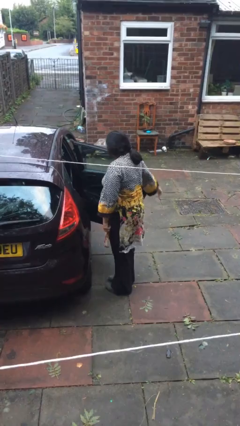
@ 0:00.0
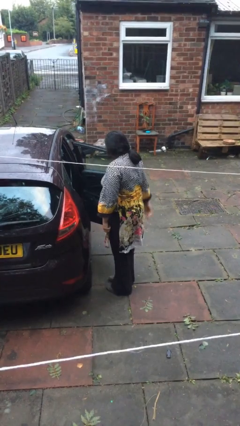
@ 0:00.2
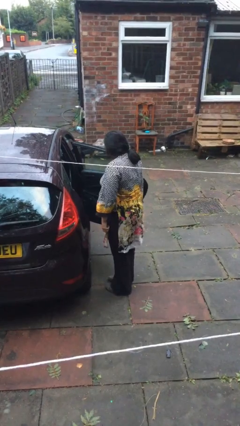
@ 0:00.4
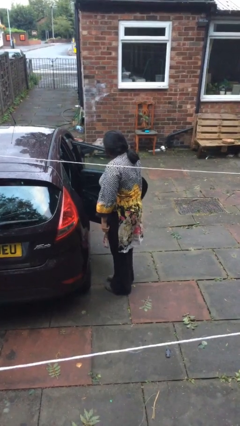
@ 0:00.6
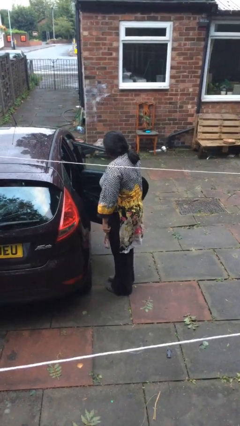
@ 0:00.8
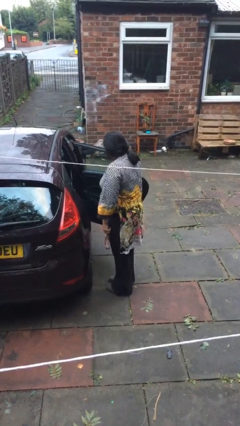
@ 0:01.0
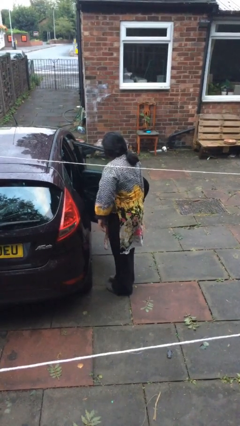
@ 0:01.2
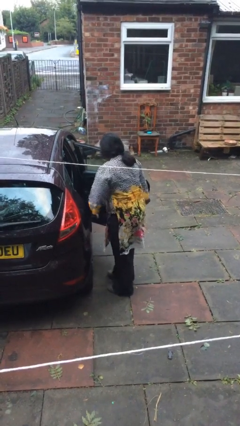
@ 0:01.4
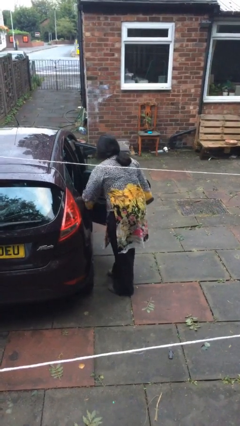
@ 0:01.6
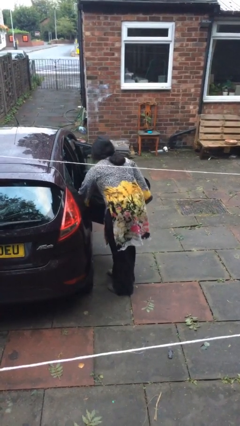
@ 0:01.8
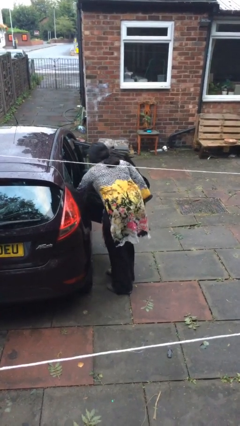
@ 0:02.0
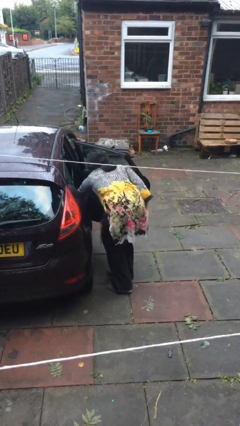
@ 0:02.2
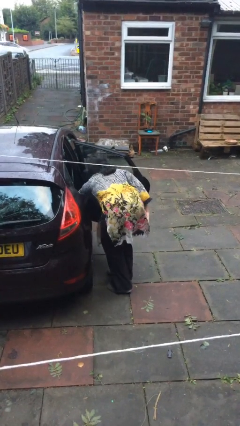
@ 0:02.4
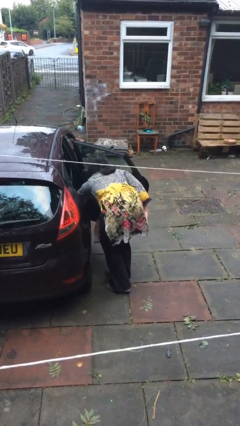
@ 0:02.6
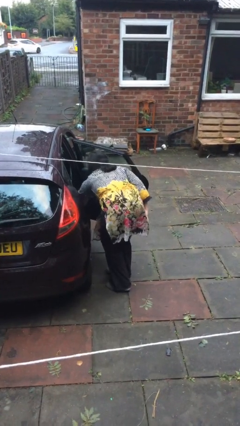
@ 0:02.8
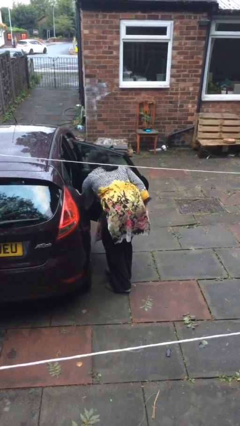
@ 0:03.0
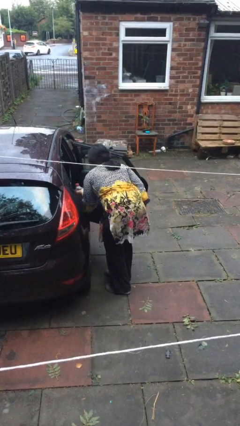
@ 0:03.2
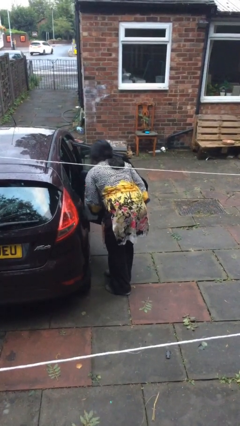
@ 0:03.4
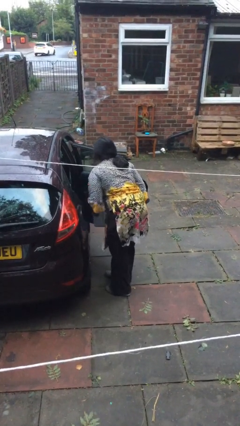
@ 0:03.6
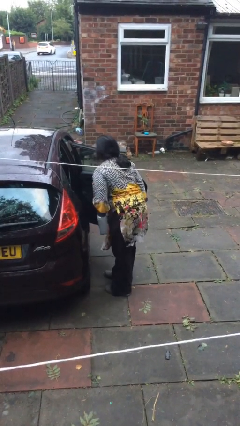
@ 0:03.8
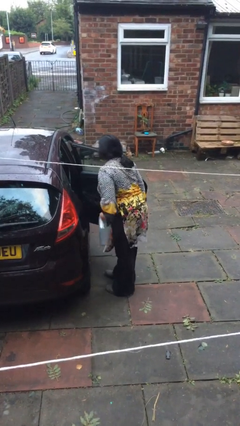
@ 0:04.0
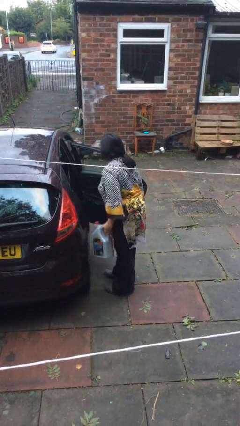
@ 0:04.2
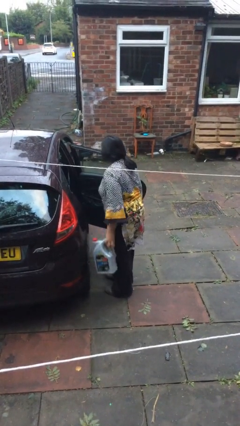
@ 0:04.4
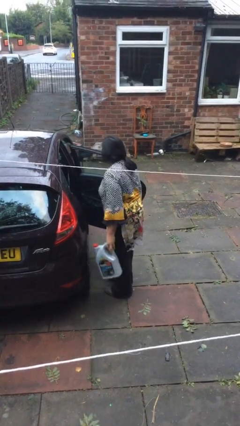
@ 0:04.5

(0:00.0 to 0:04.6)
person unloads car

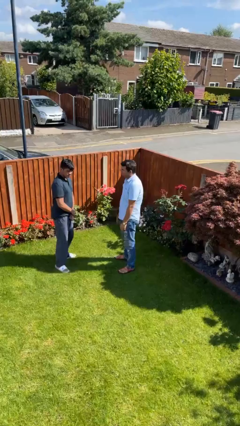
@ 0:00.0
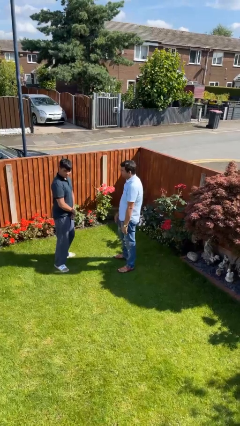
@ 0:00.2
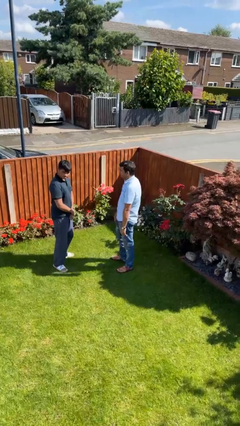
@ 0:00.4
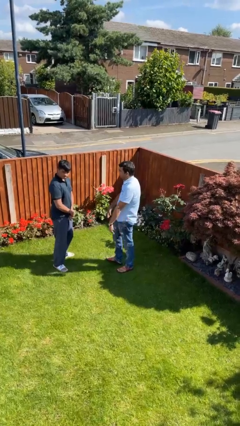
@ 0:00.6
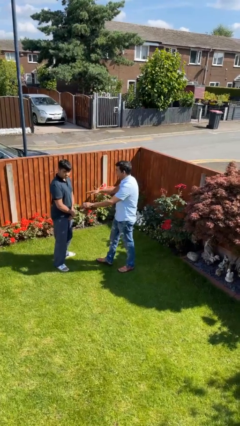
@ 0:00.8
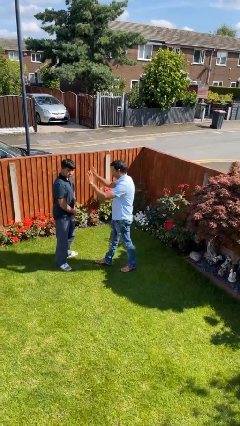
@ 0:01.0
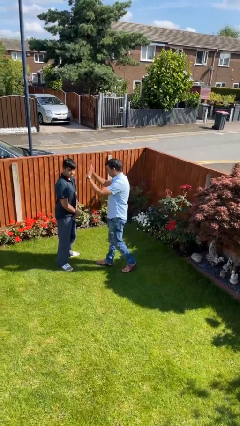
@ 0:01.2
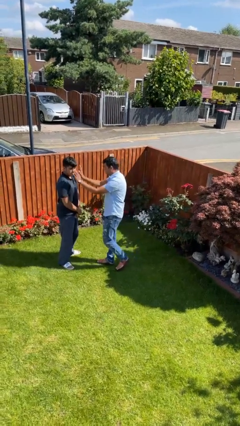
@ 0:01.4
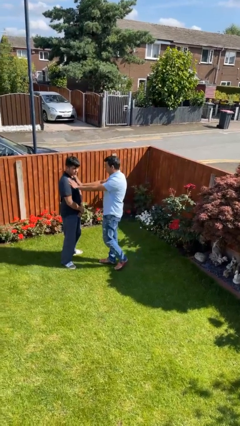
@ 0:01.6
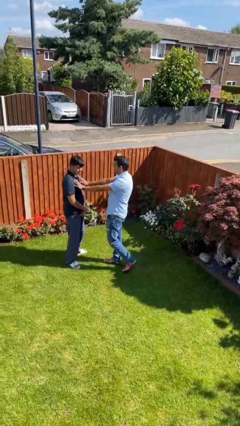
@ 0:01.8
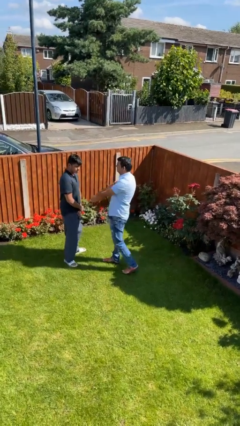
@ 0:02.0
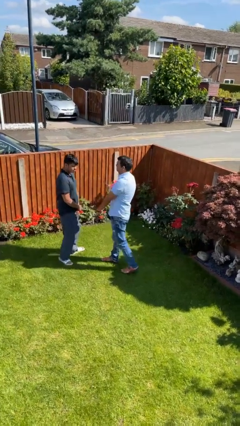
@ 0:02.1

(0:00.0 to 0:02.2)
person shoves person

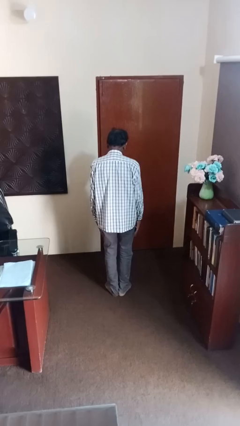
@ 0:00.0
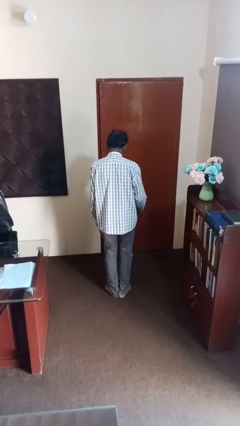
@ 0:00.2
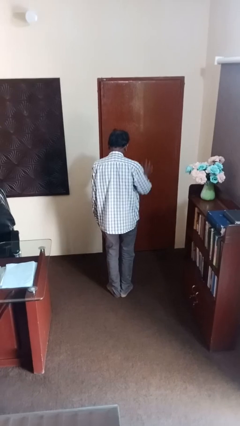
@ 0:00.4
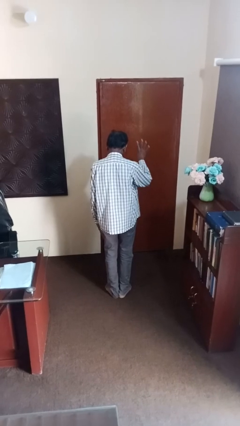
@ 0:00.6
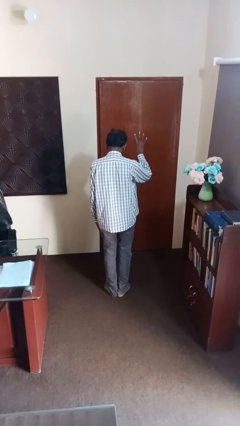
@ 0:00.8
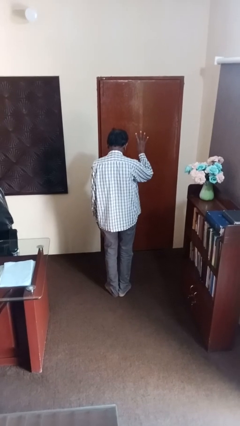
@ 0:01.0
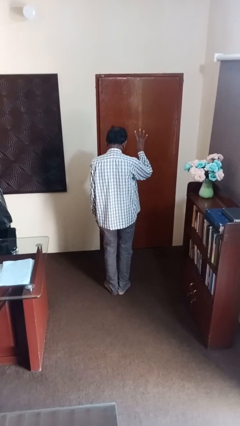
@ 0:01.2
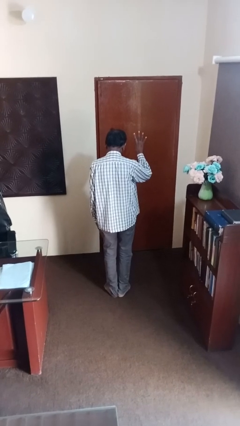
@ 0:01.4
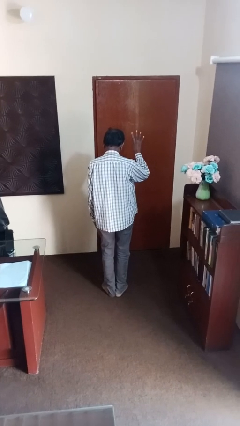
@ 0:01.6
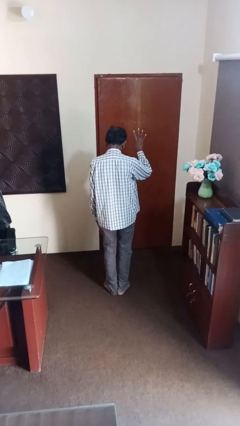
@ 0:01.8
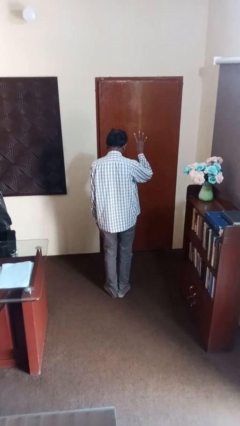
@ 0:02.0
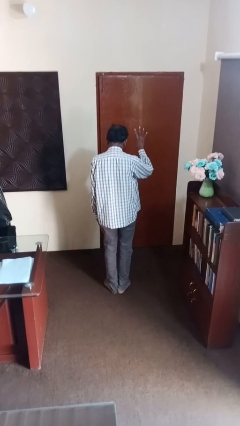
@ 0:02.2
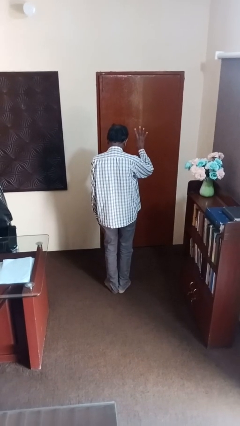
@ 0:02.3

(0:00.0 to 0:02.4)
person gestures number four

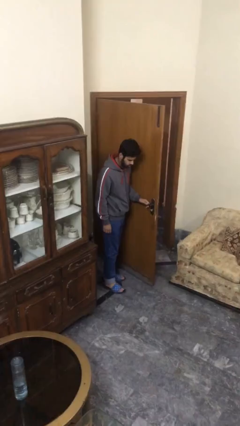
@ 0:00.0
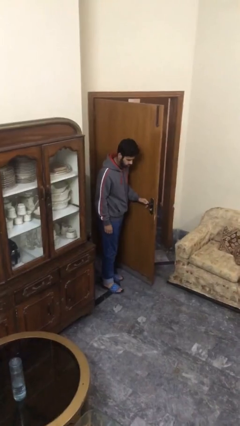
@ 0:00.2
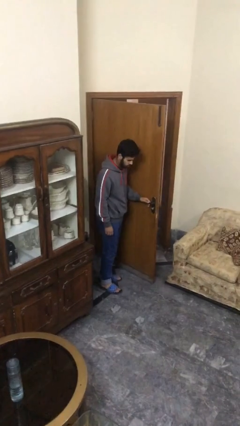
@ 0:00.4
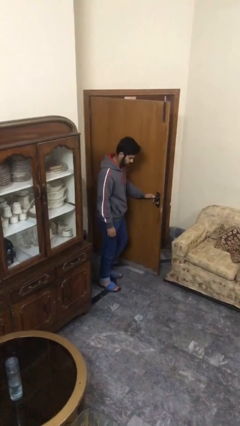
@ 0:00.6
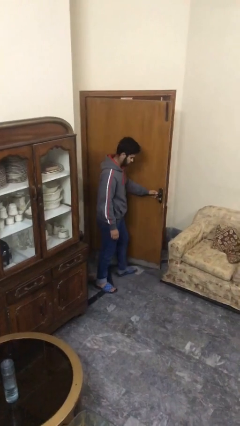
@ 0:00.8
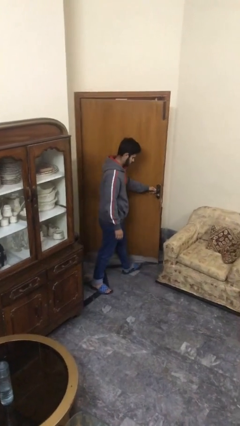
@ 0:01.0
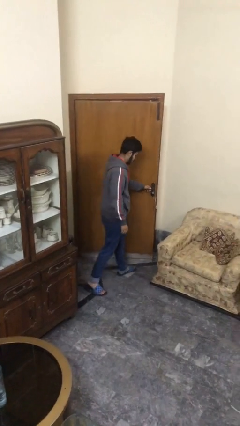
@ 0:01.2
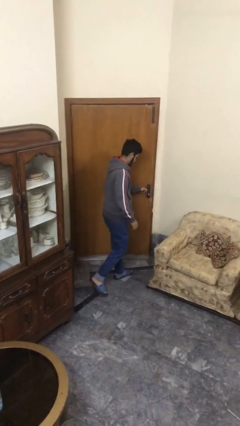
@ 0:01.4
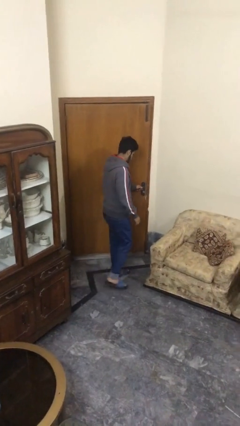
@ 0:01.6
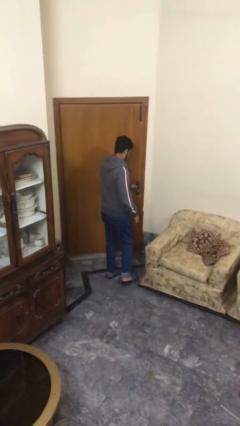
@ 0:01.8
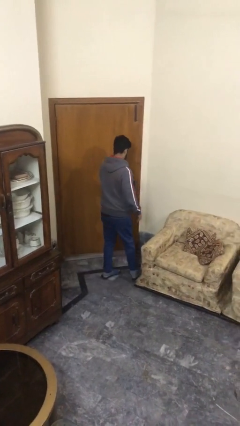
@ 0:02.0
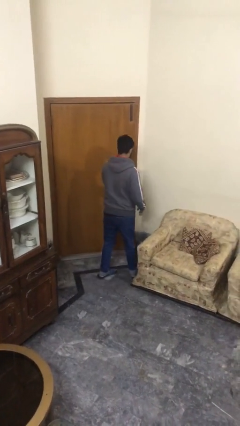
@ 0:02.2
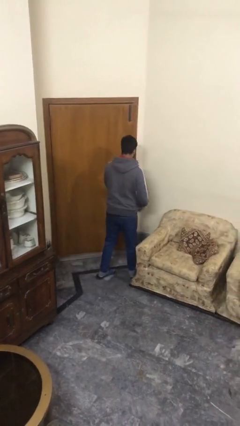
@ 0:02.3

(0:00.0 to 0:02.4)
person closes facility door

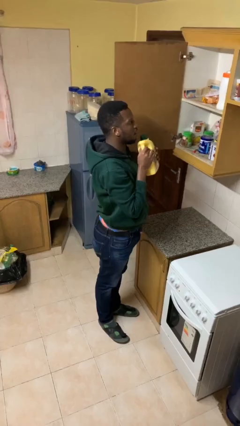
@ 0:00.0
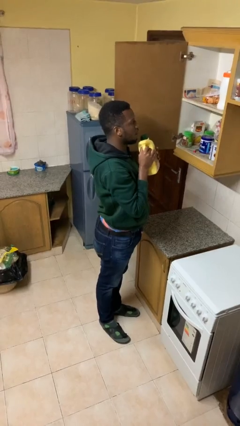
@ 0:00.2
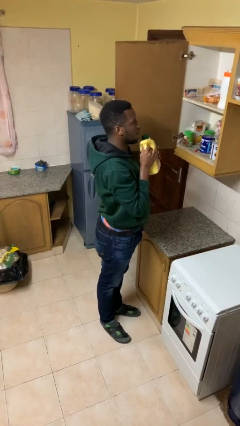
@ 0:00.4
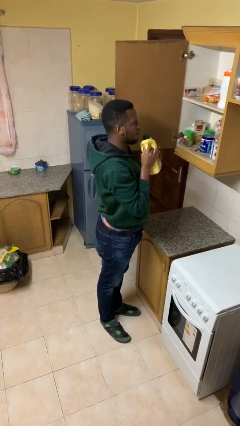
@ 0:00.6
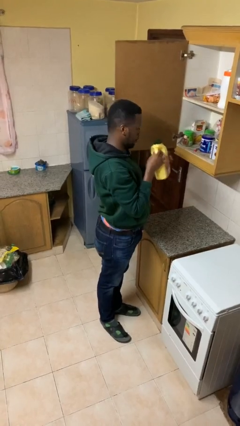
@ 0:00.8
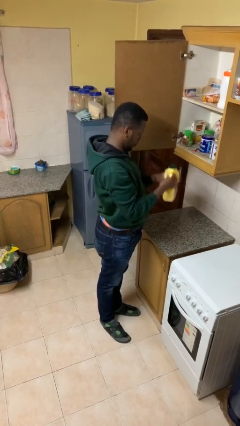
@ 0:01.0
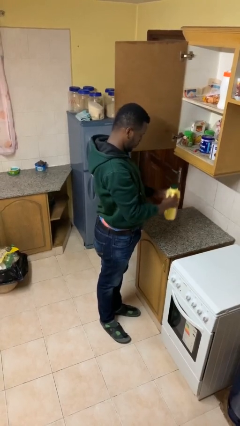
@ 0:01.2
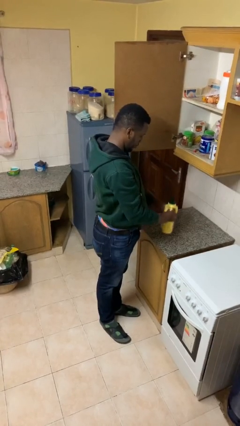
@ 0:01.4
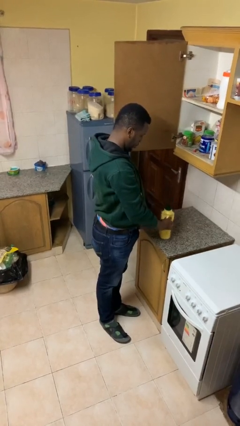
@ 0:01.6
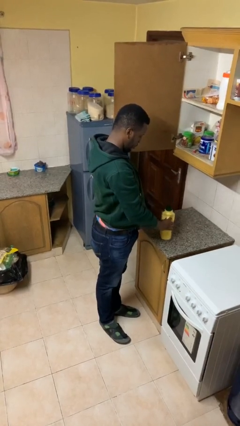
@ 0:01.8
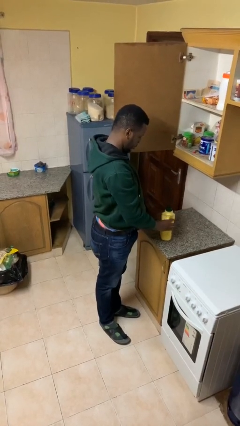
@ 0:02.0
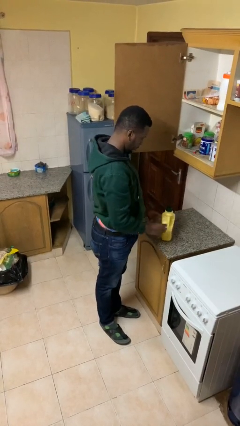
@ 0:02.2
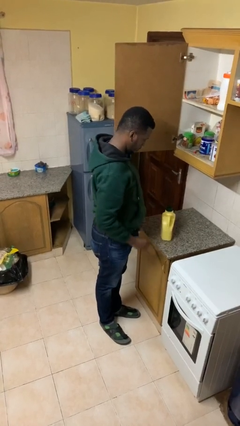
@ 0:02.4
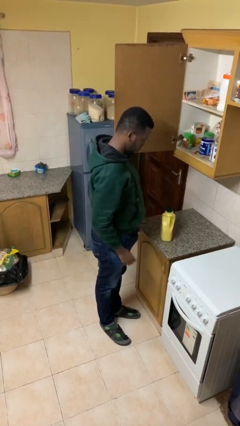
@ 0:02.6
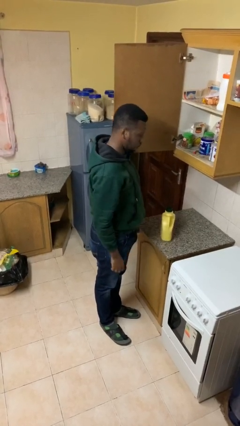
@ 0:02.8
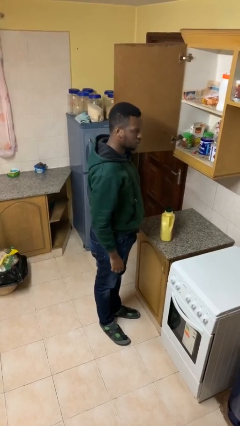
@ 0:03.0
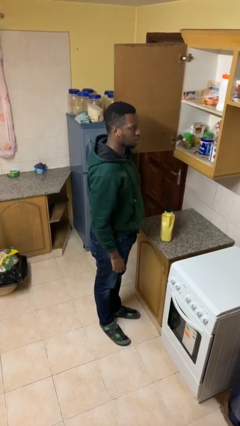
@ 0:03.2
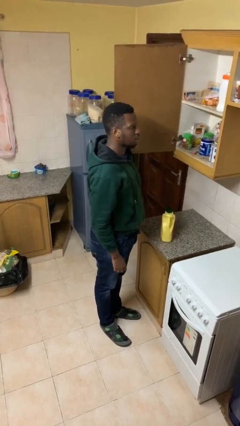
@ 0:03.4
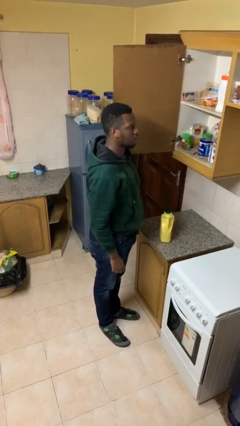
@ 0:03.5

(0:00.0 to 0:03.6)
person puts down object on table

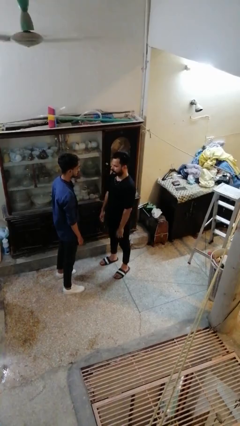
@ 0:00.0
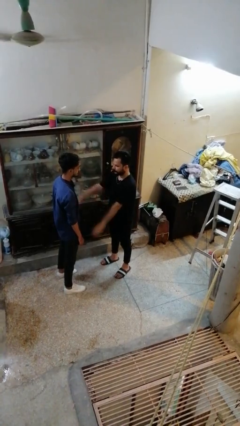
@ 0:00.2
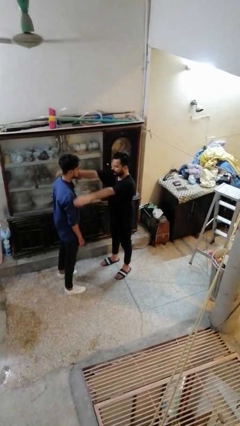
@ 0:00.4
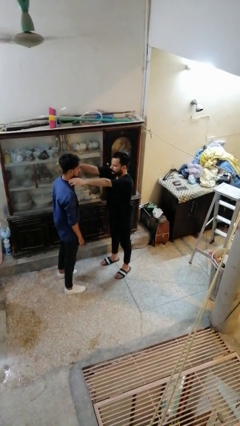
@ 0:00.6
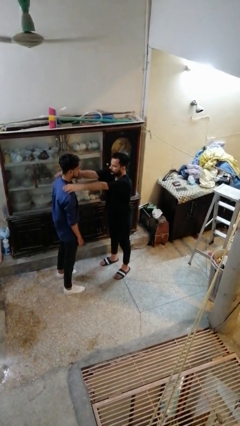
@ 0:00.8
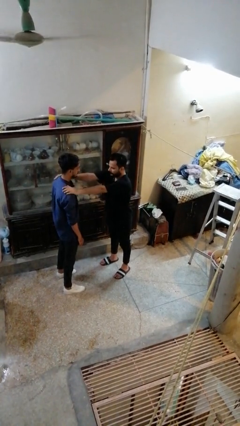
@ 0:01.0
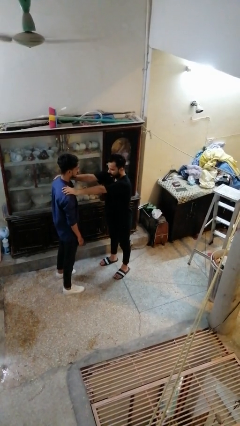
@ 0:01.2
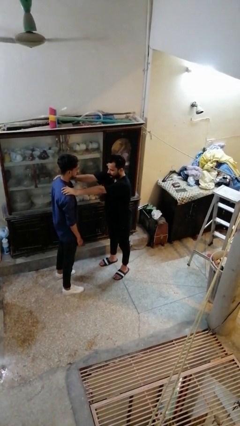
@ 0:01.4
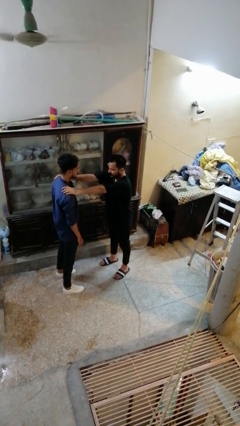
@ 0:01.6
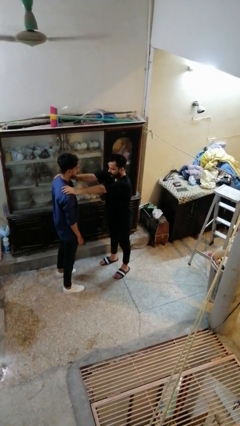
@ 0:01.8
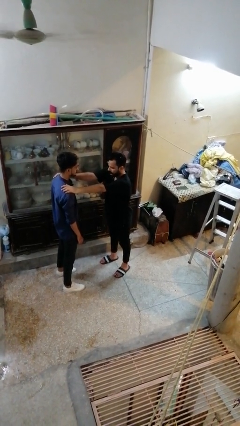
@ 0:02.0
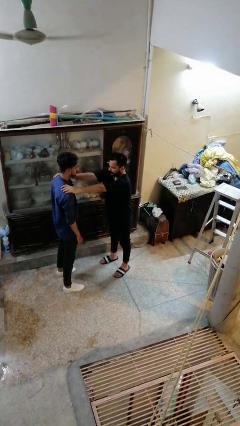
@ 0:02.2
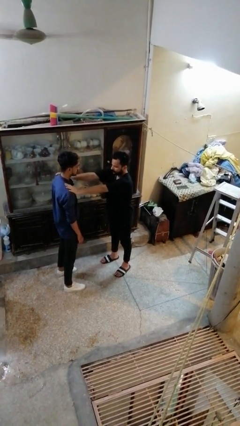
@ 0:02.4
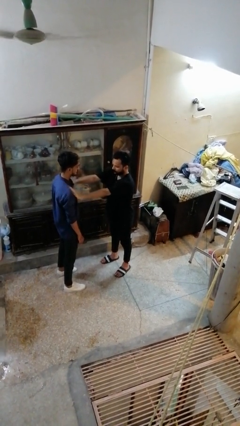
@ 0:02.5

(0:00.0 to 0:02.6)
person pounds shoulders of person
